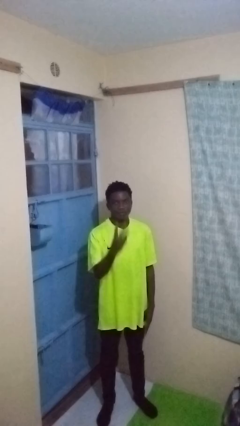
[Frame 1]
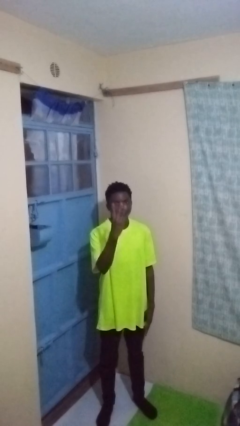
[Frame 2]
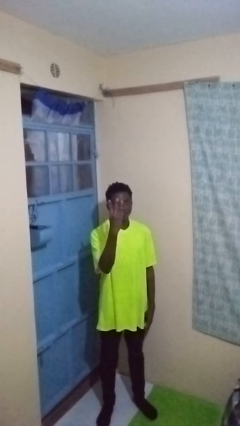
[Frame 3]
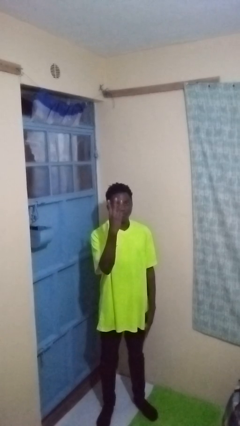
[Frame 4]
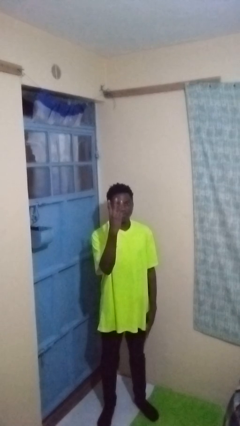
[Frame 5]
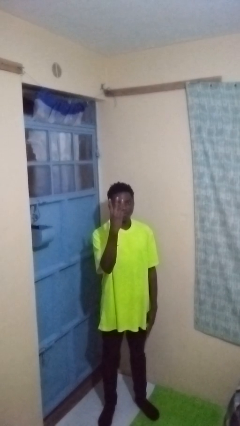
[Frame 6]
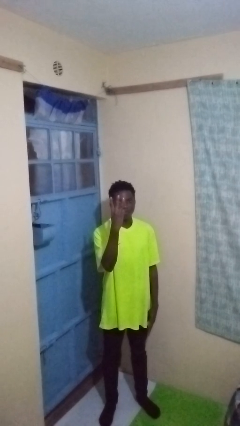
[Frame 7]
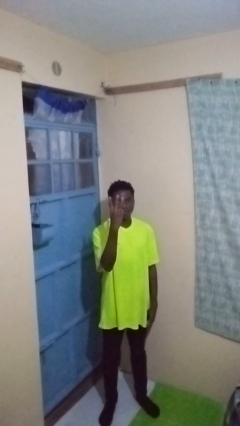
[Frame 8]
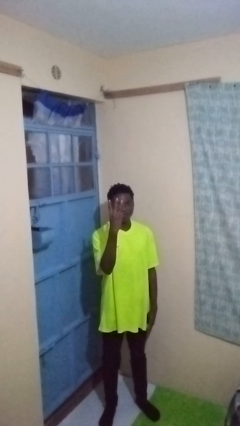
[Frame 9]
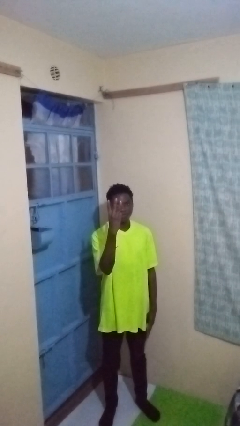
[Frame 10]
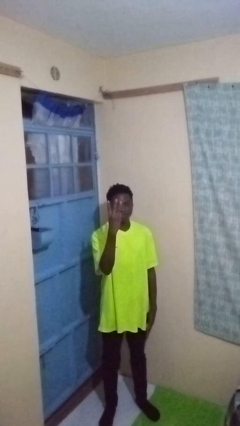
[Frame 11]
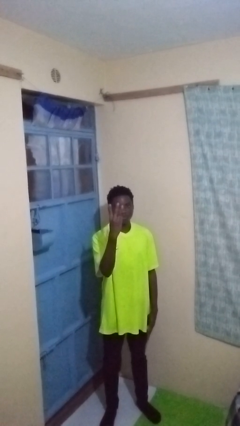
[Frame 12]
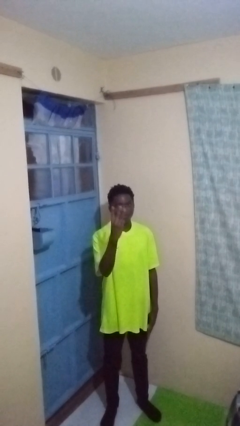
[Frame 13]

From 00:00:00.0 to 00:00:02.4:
person gestures number three

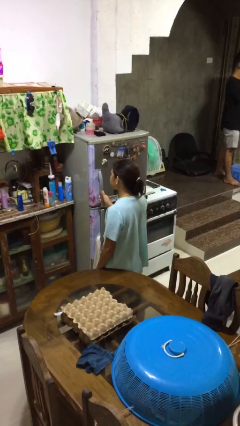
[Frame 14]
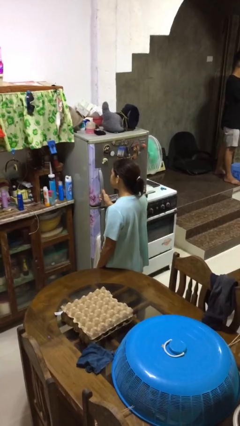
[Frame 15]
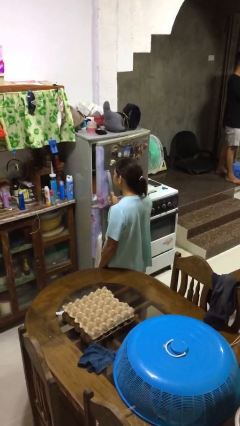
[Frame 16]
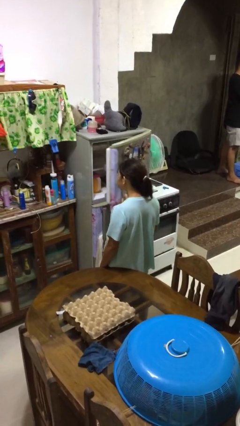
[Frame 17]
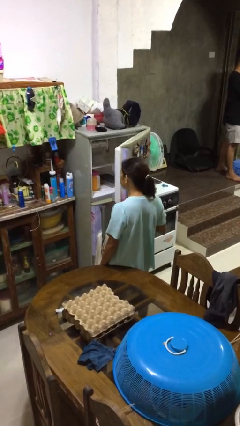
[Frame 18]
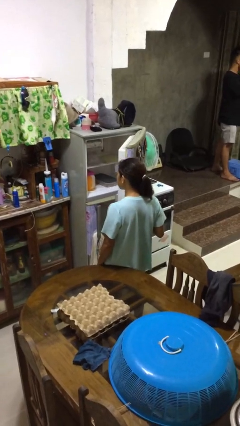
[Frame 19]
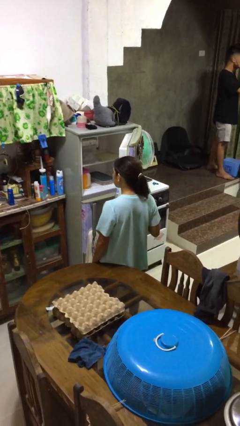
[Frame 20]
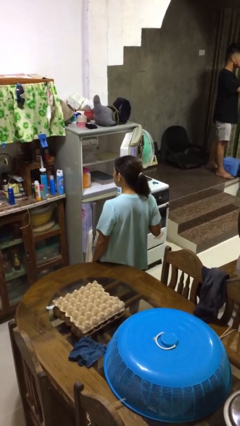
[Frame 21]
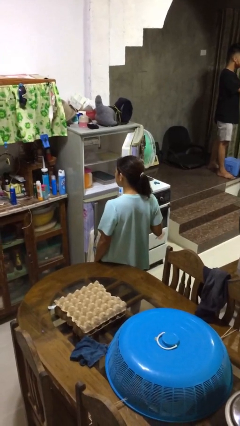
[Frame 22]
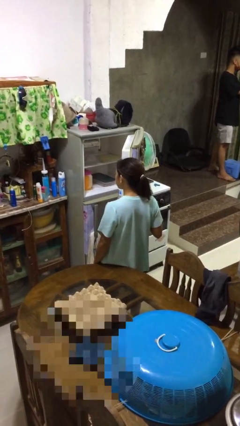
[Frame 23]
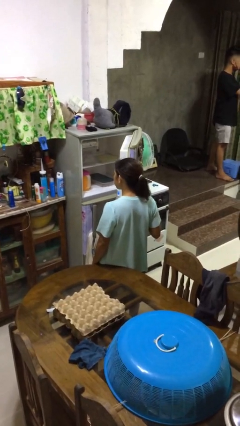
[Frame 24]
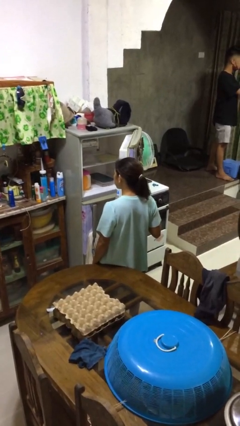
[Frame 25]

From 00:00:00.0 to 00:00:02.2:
person opens refrigerator

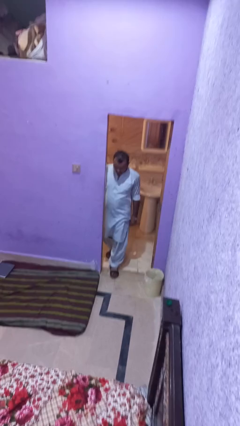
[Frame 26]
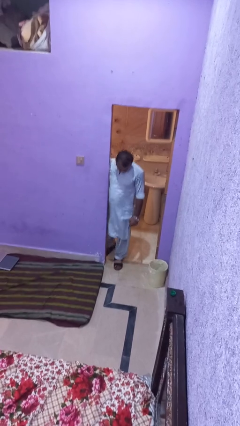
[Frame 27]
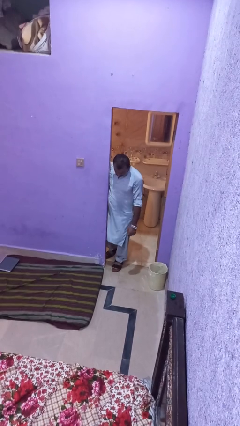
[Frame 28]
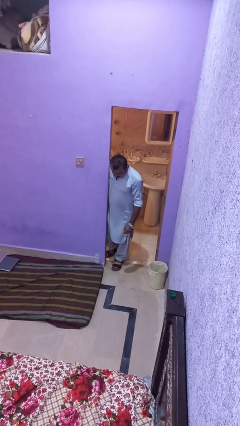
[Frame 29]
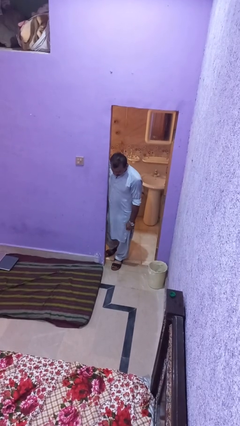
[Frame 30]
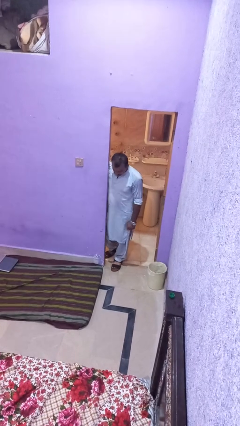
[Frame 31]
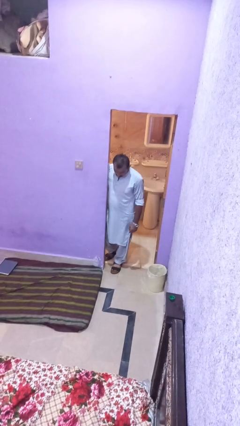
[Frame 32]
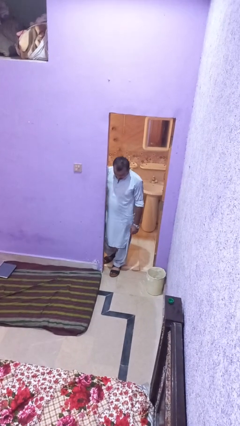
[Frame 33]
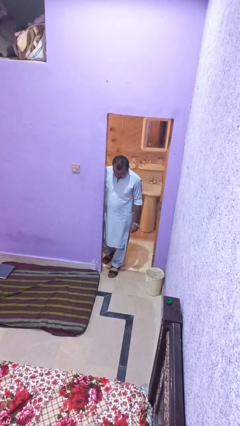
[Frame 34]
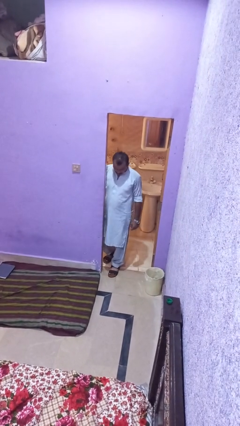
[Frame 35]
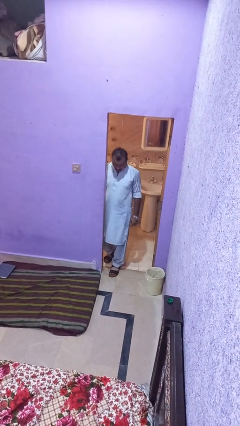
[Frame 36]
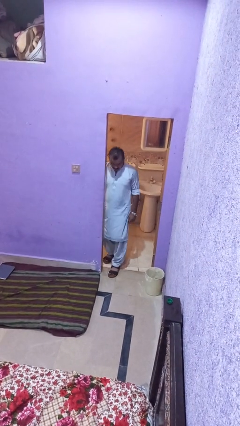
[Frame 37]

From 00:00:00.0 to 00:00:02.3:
person bumps into wall

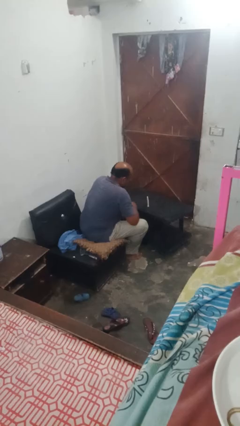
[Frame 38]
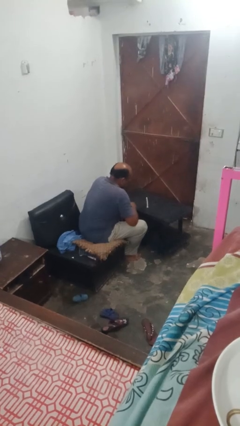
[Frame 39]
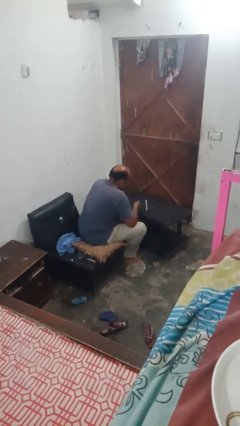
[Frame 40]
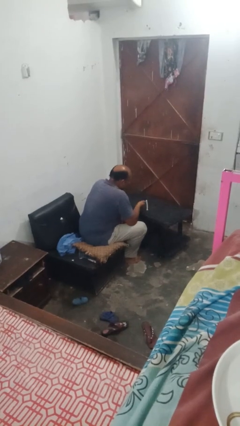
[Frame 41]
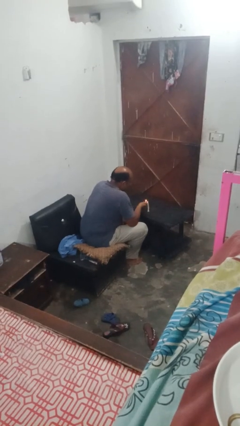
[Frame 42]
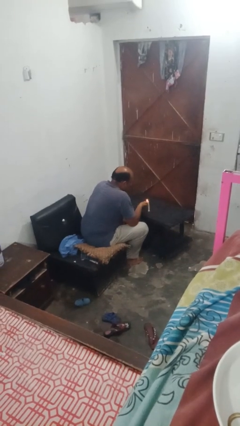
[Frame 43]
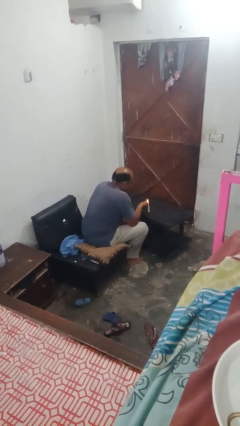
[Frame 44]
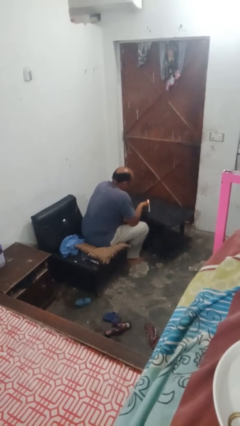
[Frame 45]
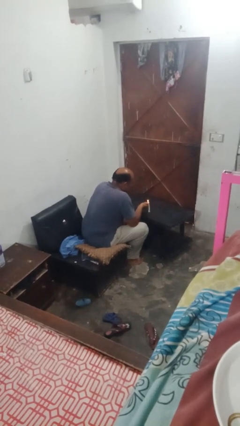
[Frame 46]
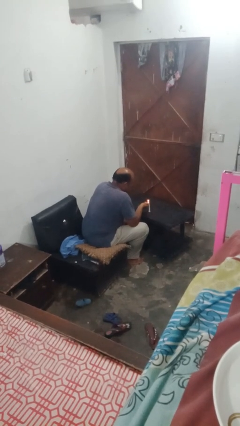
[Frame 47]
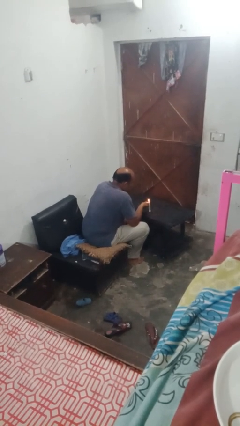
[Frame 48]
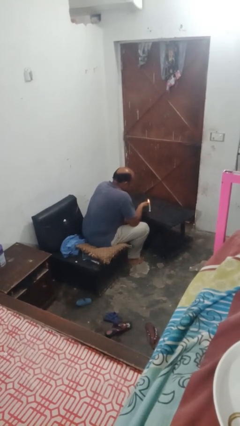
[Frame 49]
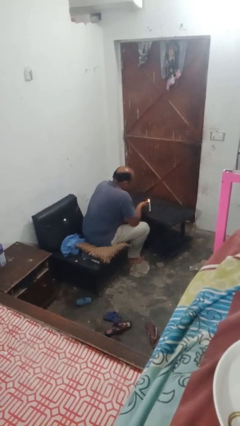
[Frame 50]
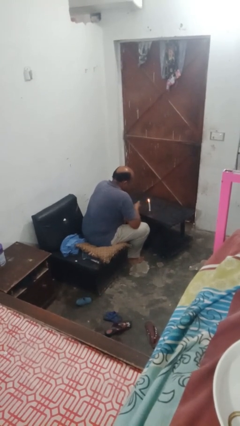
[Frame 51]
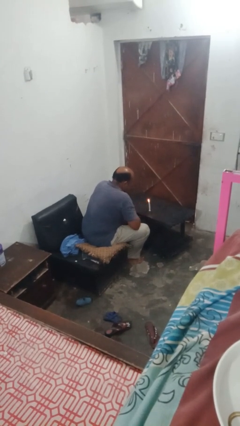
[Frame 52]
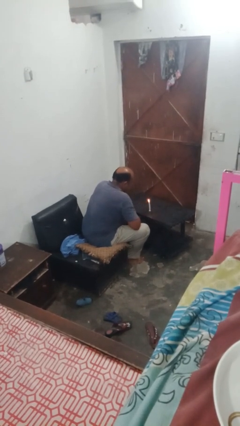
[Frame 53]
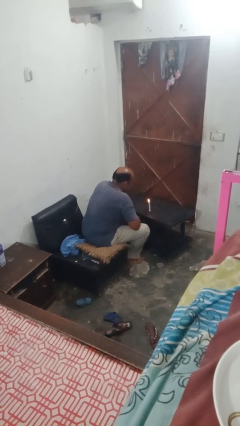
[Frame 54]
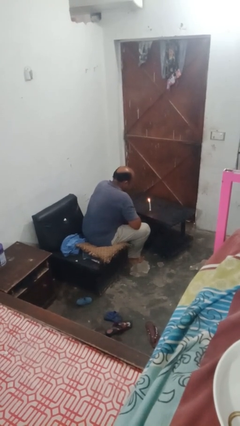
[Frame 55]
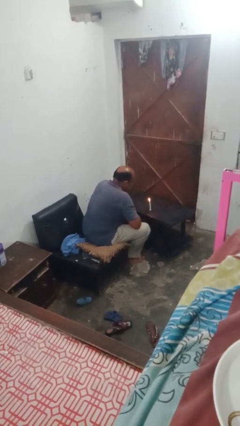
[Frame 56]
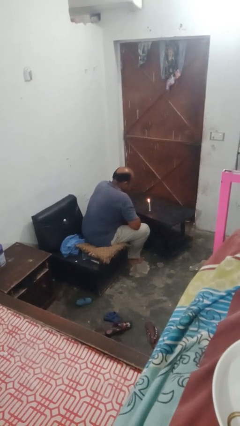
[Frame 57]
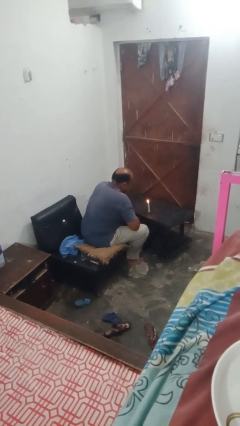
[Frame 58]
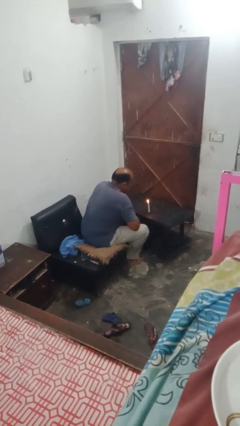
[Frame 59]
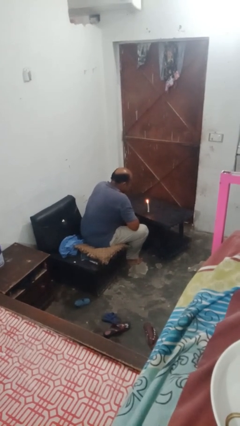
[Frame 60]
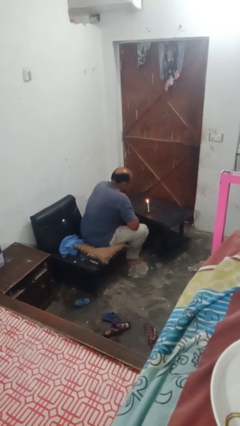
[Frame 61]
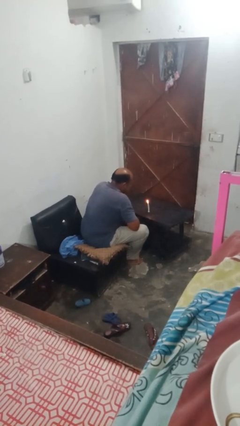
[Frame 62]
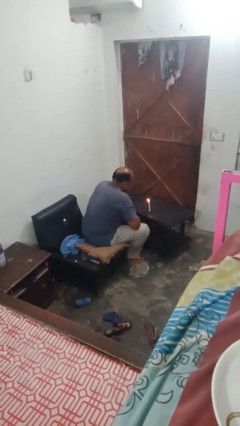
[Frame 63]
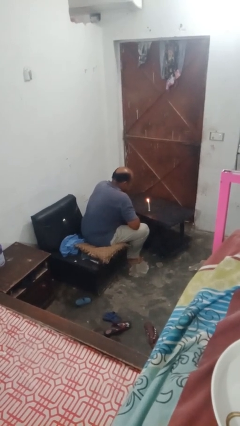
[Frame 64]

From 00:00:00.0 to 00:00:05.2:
person lights candle

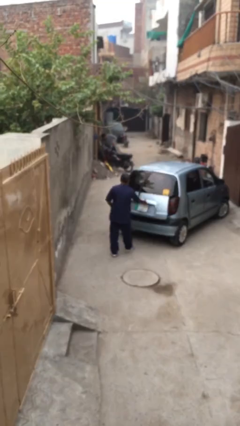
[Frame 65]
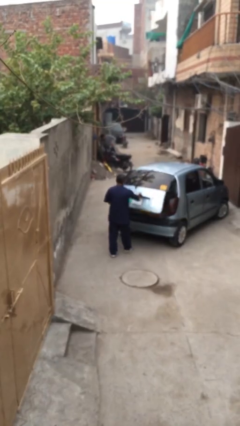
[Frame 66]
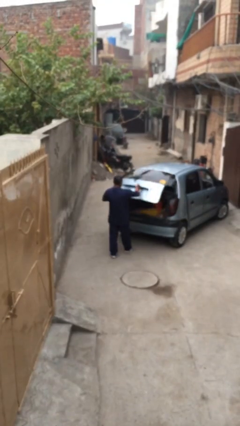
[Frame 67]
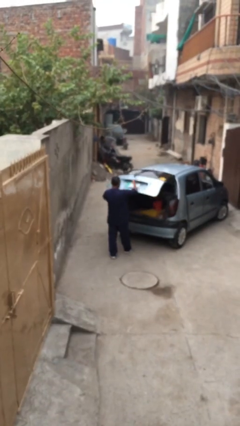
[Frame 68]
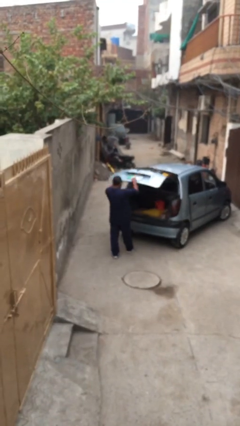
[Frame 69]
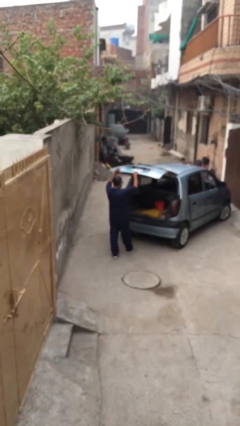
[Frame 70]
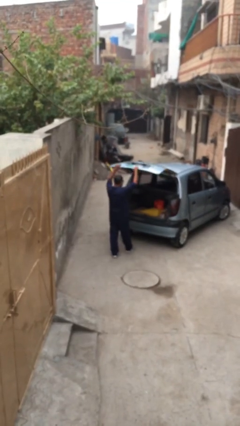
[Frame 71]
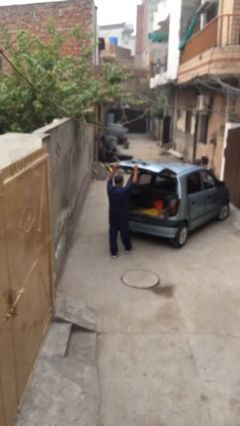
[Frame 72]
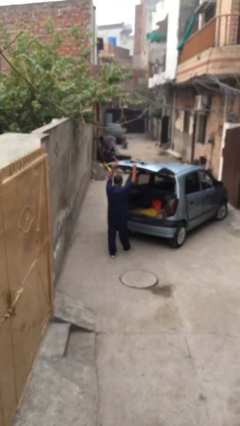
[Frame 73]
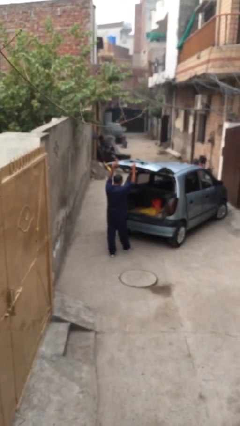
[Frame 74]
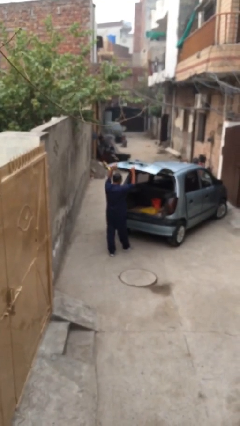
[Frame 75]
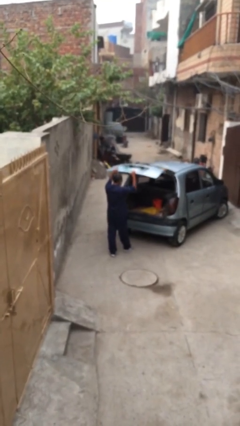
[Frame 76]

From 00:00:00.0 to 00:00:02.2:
person opens car trunk

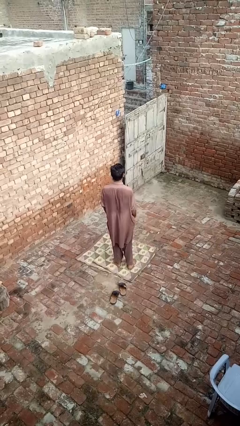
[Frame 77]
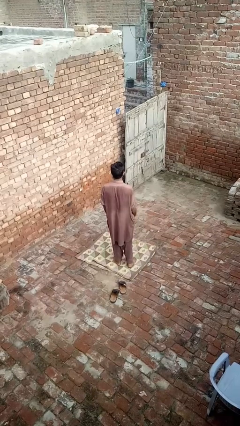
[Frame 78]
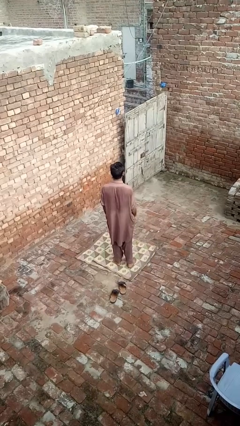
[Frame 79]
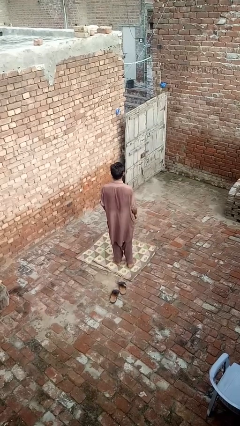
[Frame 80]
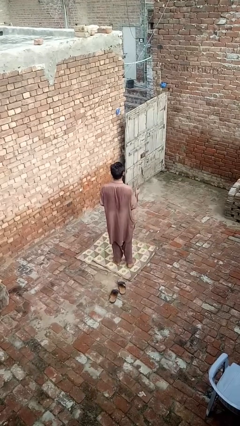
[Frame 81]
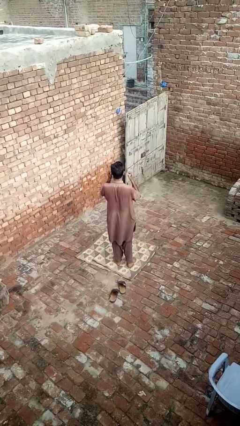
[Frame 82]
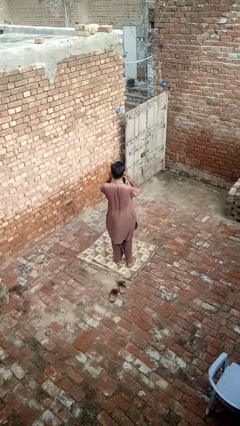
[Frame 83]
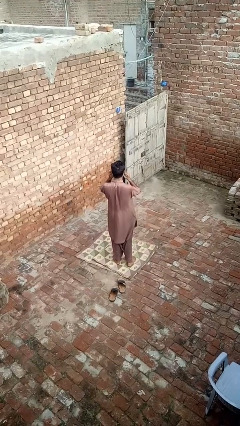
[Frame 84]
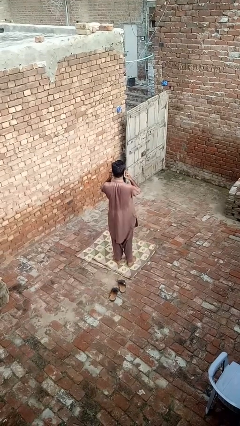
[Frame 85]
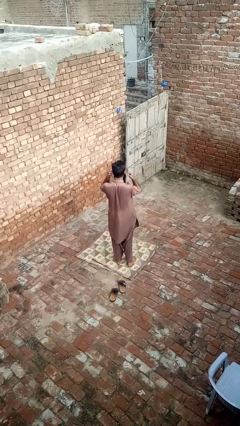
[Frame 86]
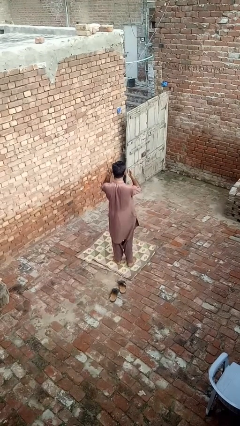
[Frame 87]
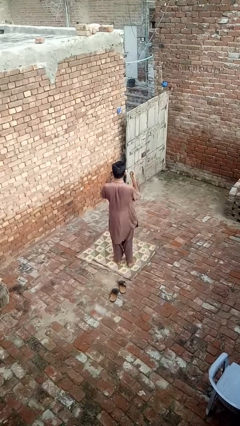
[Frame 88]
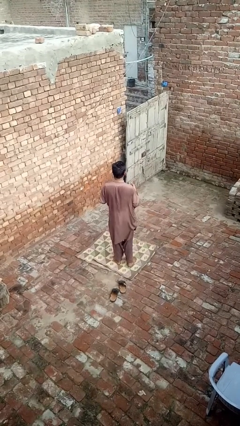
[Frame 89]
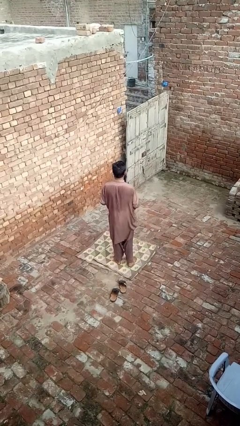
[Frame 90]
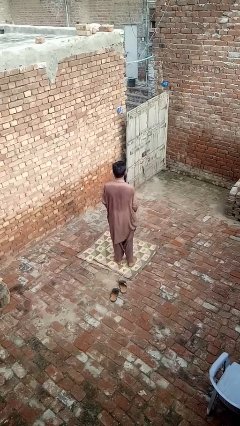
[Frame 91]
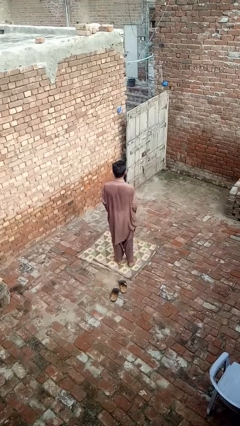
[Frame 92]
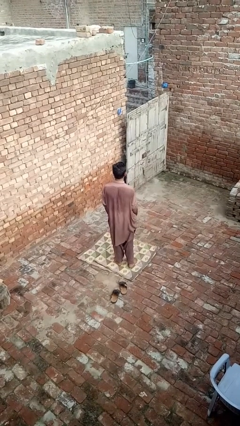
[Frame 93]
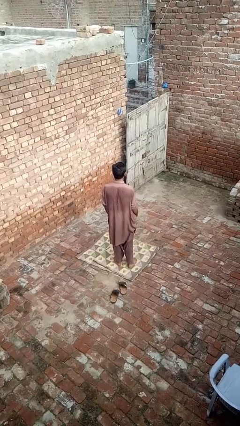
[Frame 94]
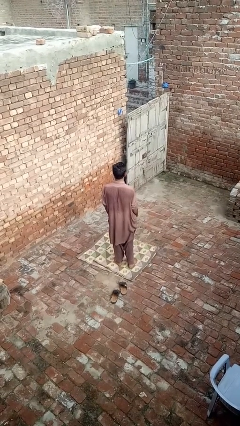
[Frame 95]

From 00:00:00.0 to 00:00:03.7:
person takes off facemask
